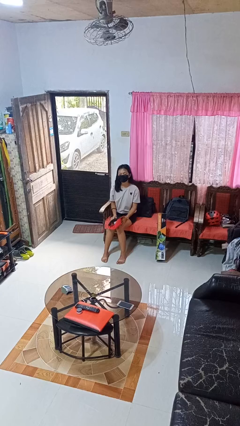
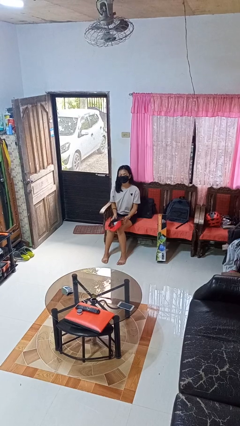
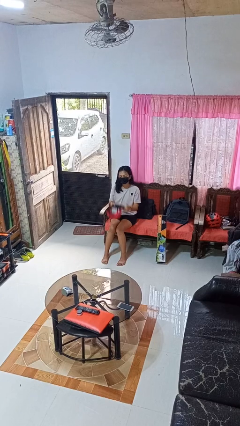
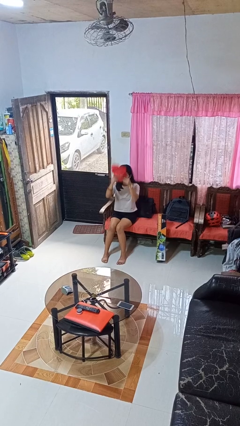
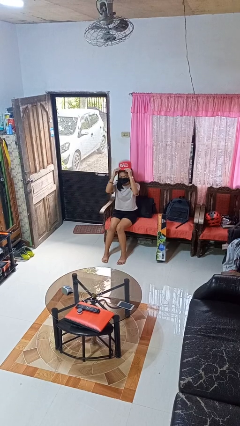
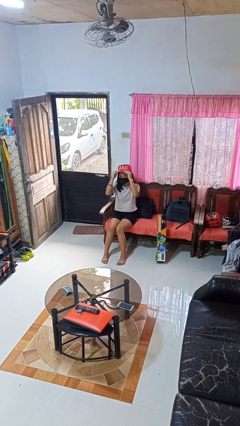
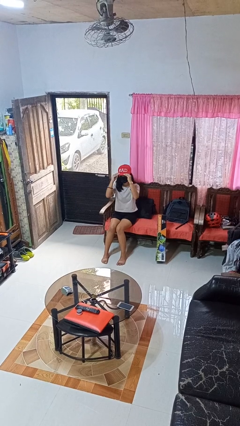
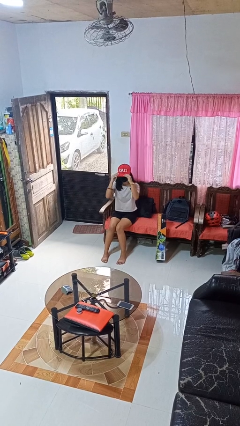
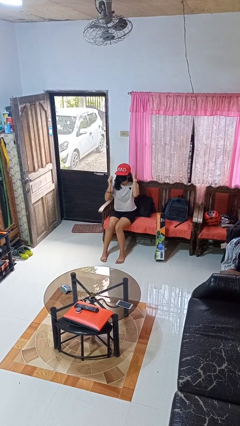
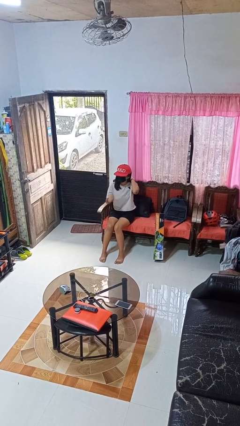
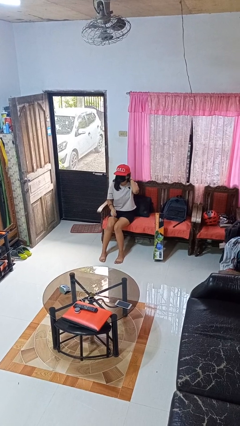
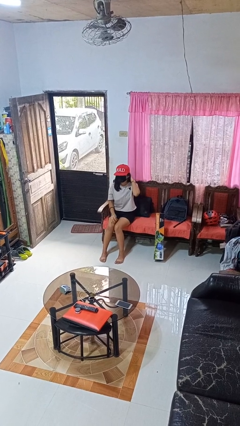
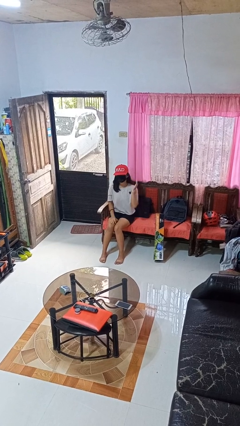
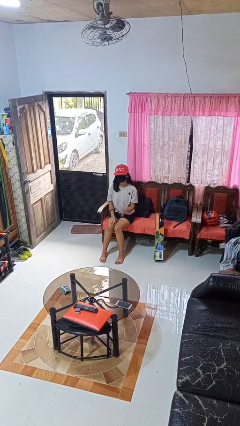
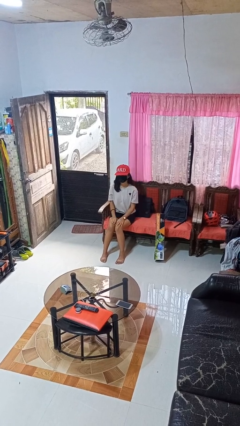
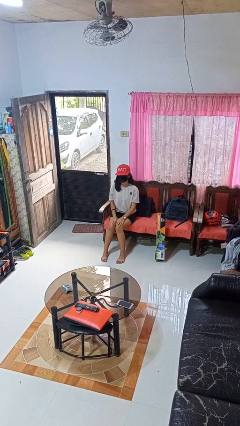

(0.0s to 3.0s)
person puts on hat

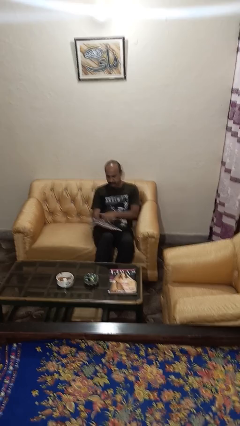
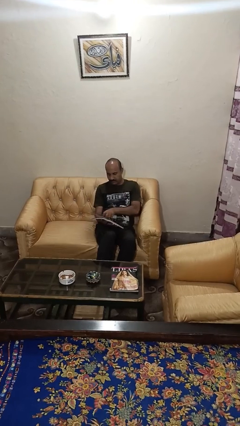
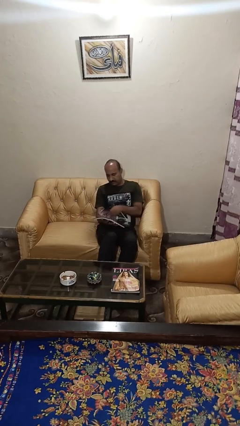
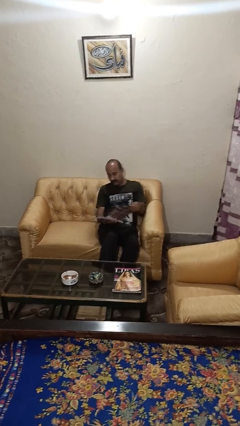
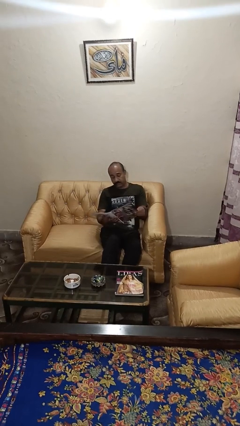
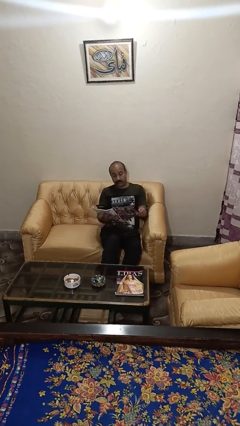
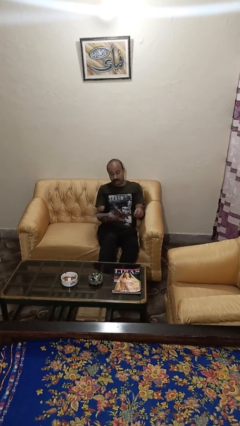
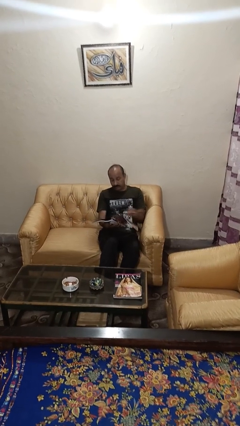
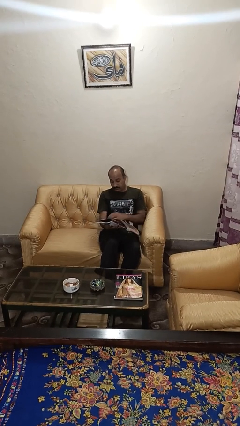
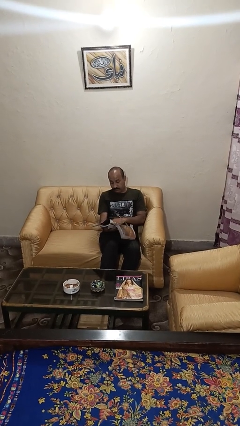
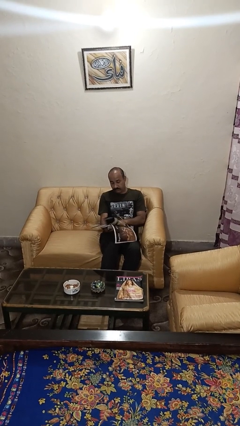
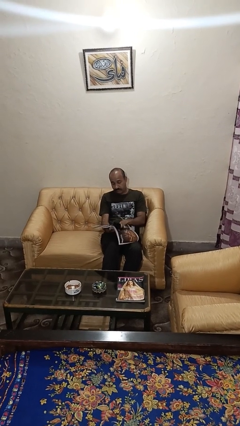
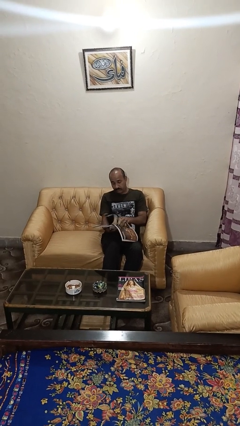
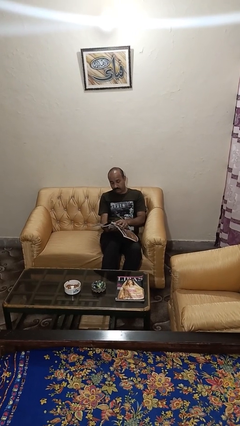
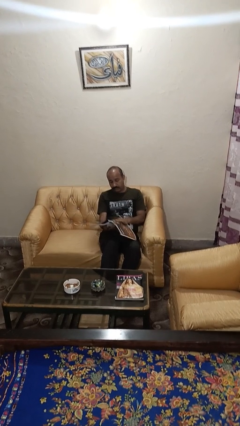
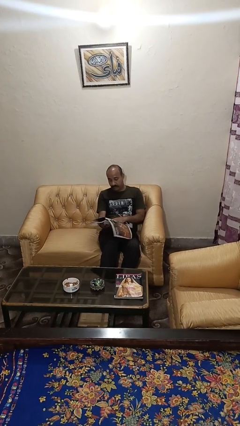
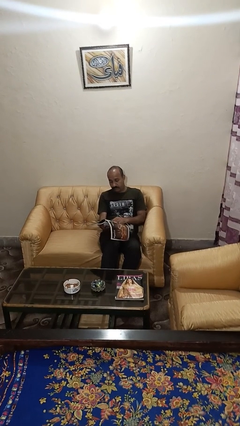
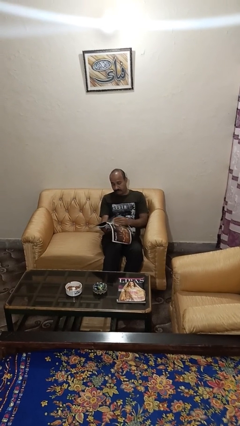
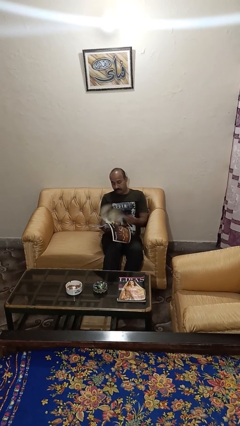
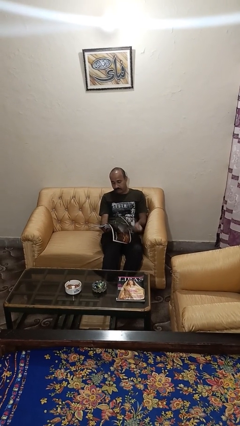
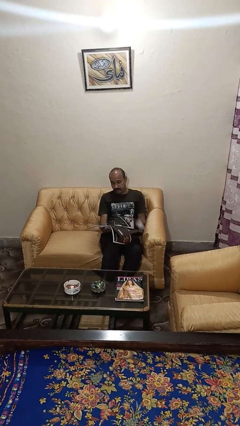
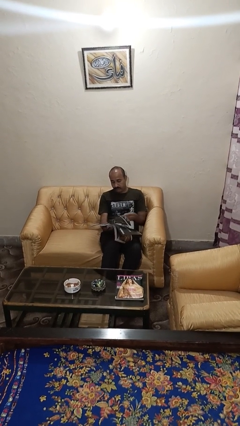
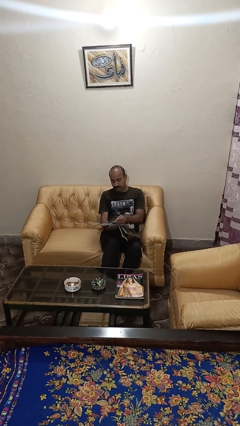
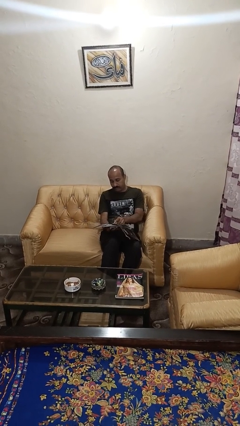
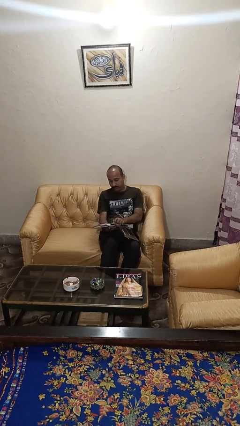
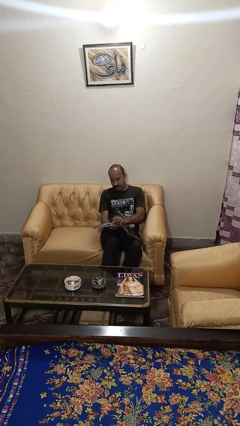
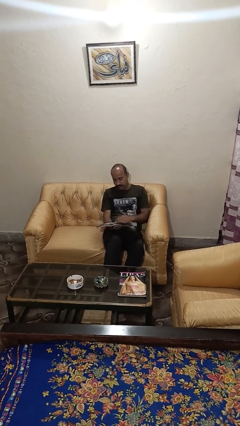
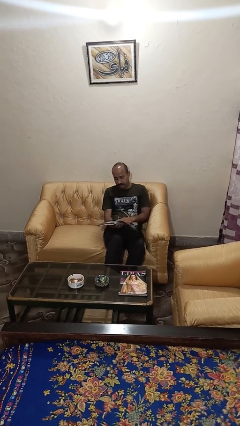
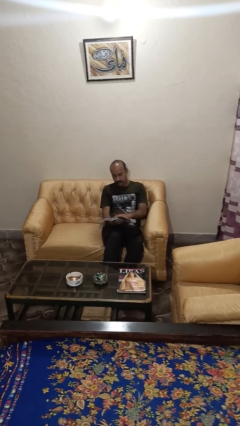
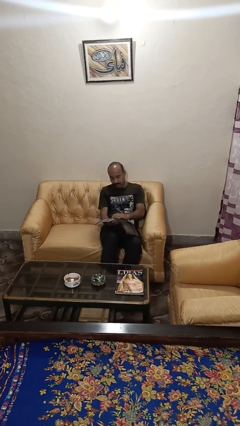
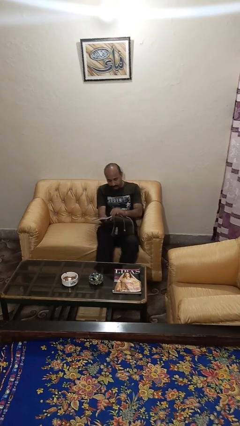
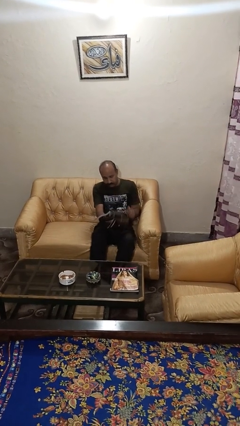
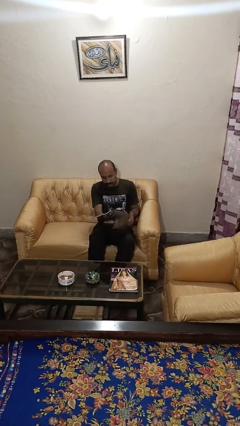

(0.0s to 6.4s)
person reads magazine

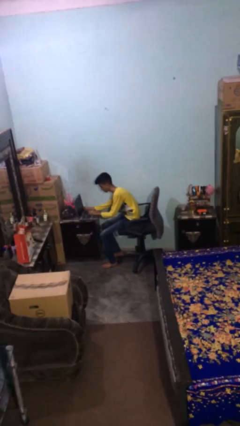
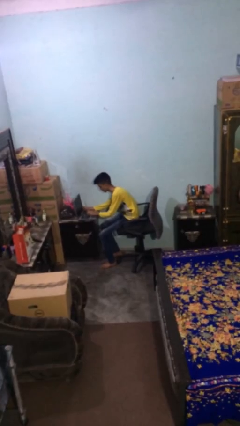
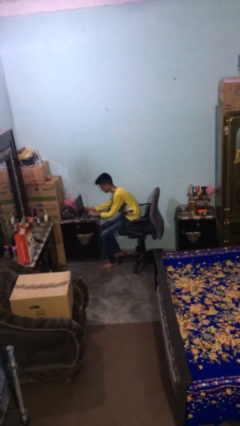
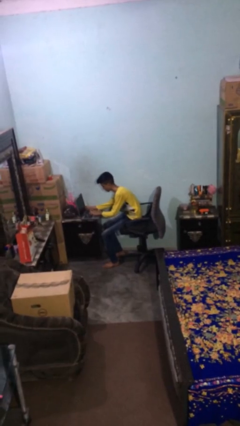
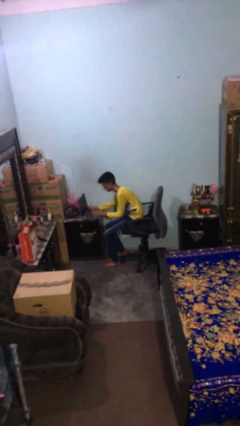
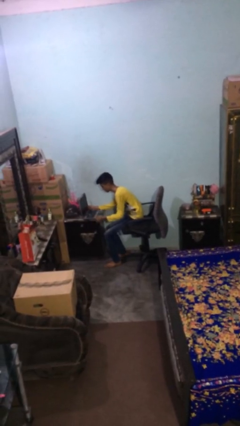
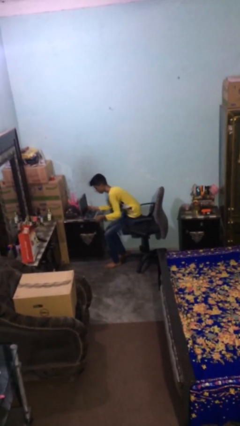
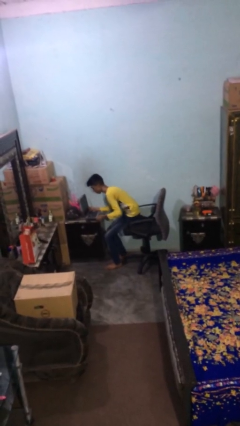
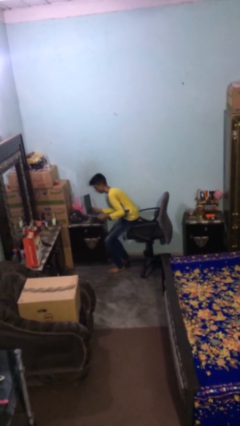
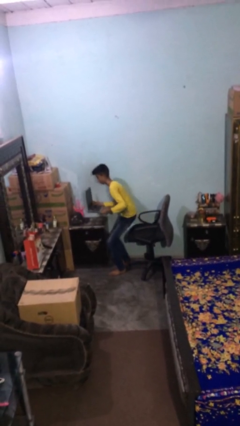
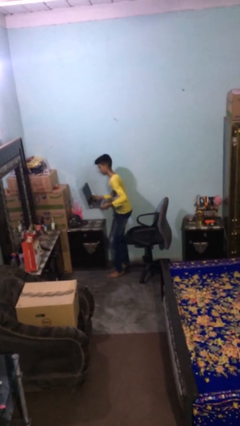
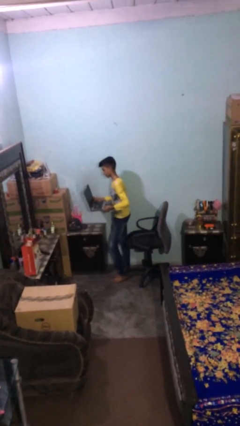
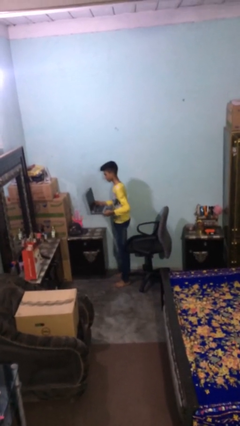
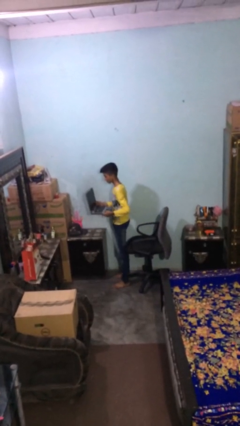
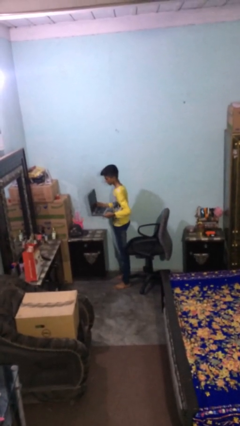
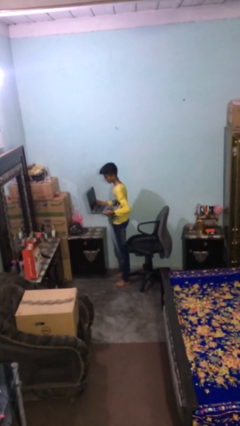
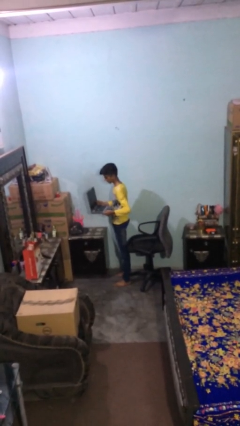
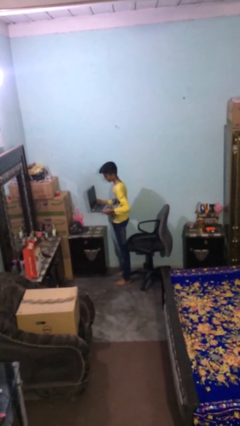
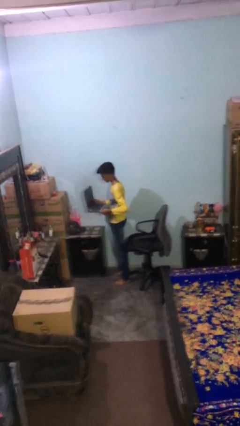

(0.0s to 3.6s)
person stands up

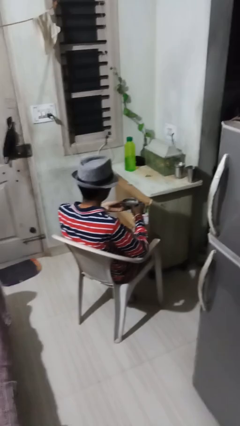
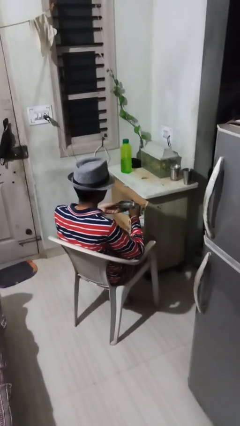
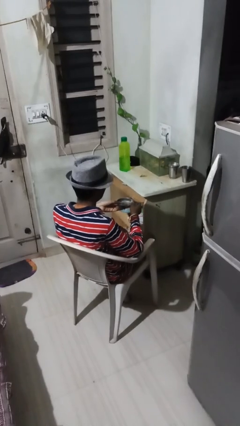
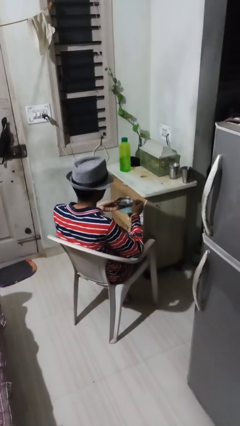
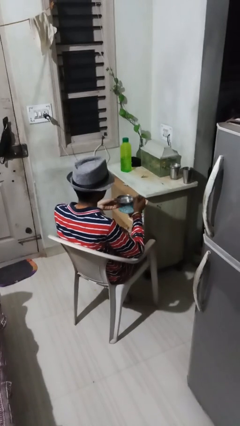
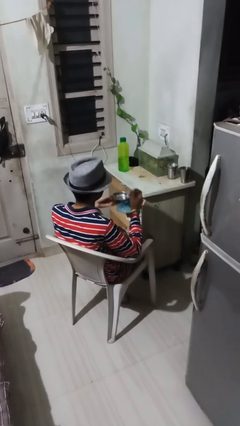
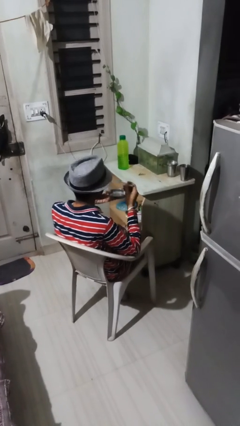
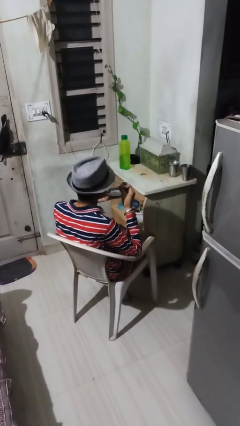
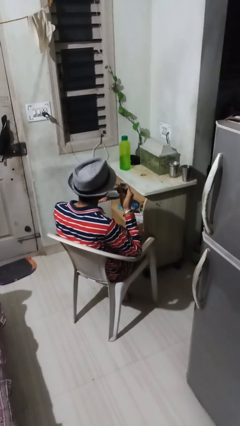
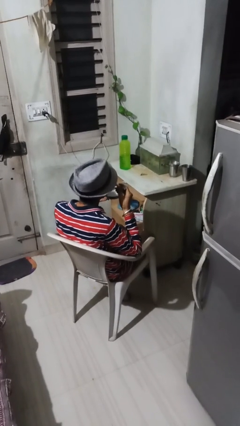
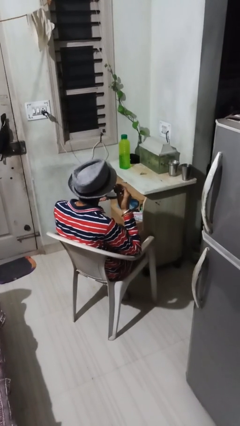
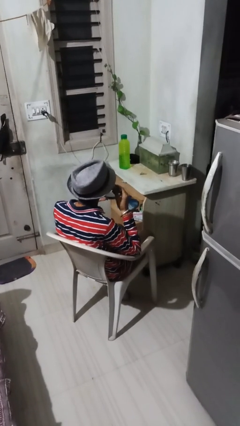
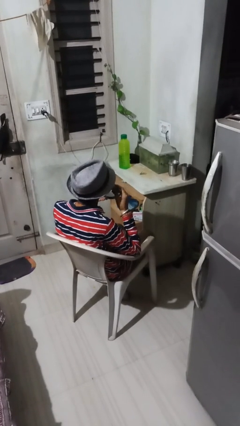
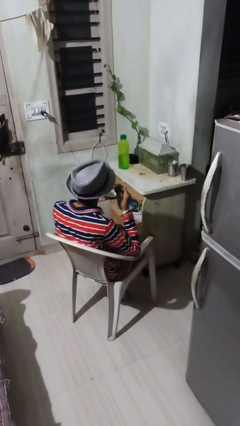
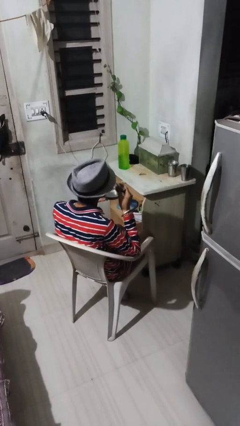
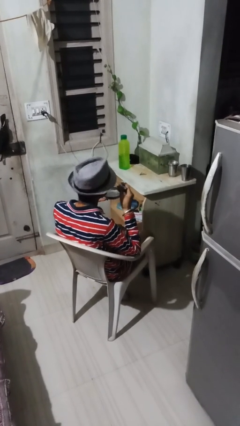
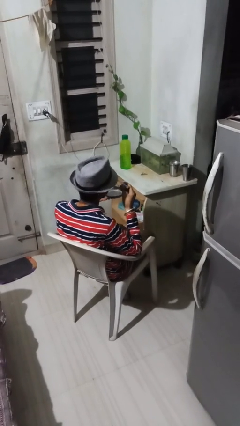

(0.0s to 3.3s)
person eats with utensil

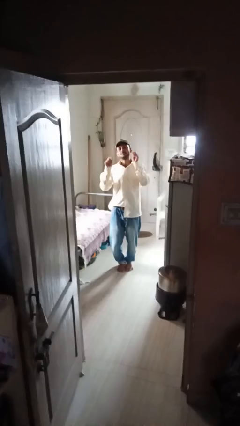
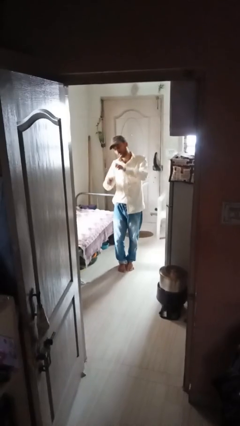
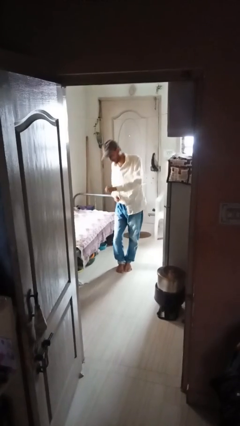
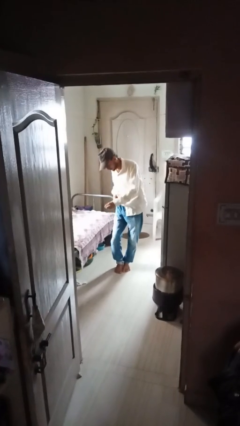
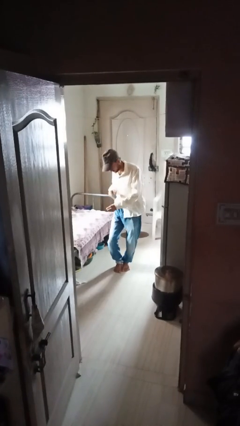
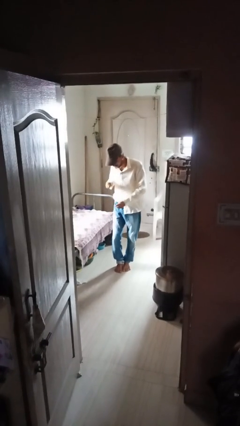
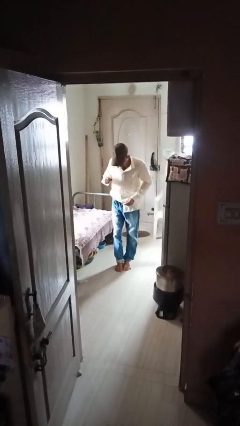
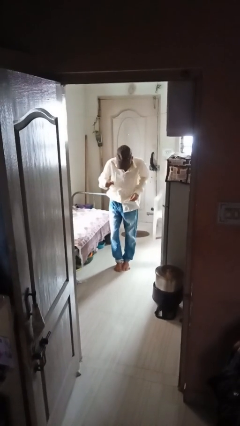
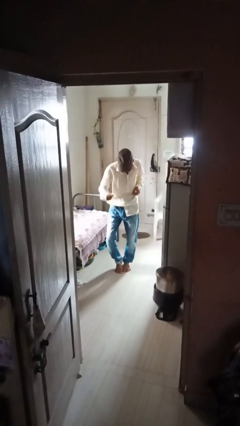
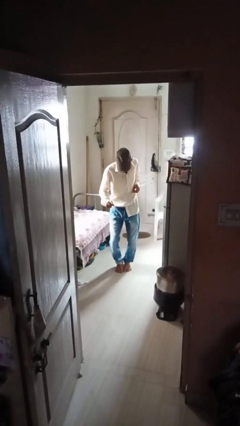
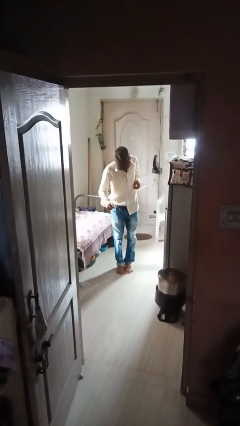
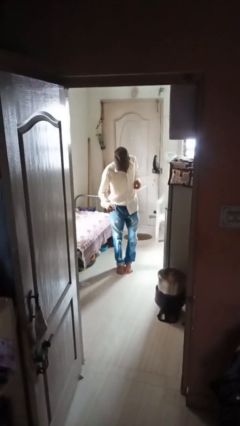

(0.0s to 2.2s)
person dances in place
